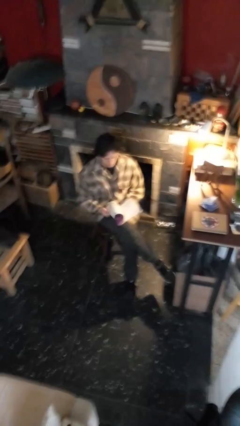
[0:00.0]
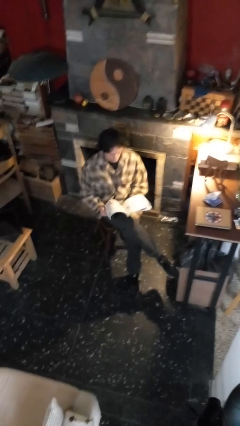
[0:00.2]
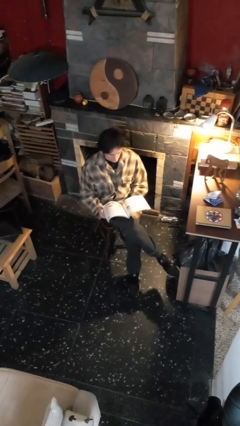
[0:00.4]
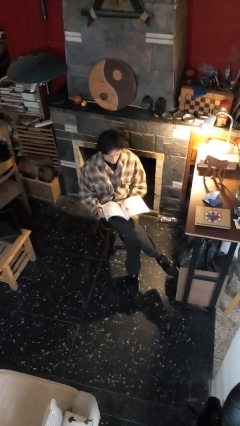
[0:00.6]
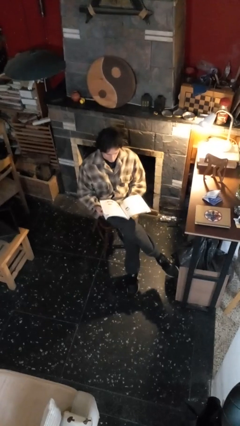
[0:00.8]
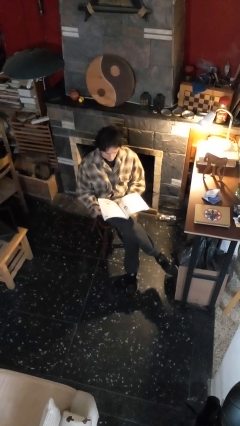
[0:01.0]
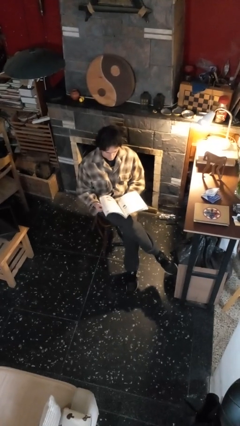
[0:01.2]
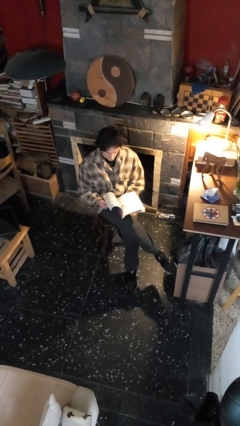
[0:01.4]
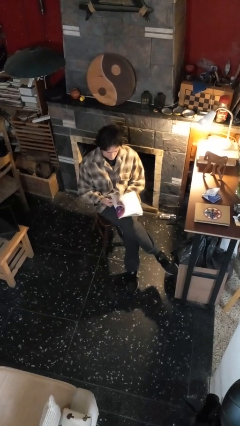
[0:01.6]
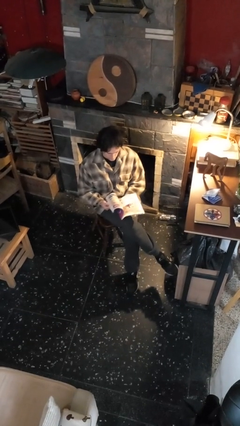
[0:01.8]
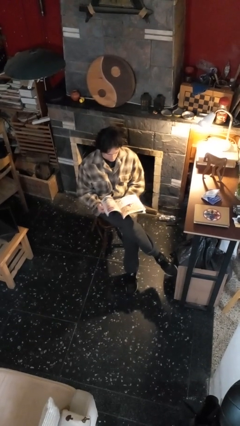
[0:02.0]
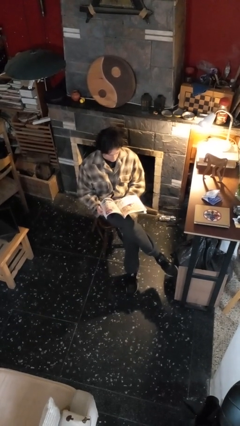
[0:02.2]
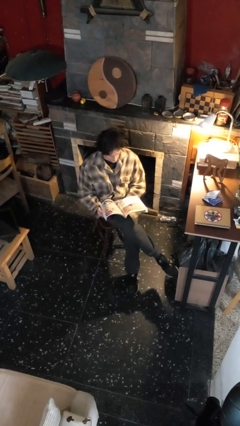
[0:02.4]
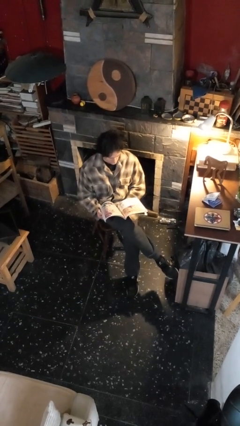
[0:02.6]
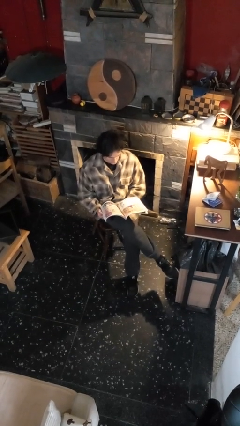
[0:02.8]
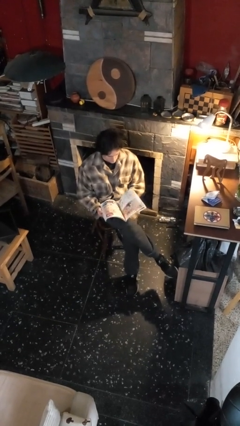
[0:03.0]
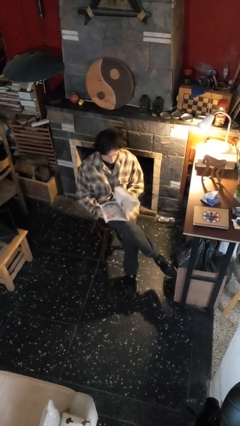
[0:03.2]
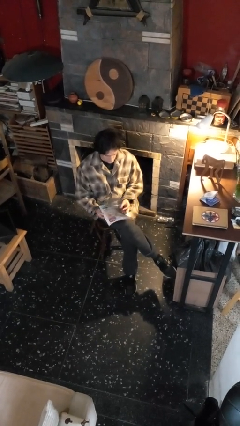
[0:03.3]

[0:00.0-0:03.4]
person reads magazine

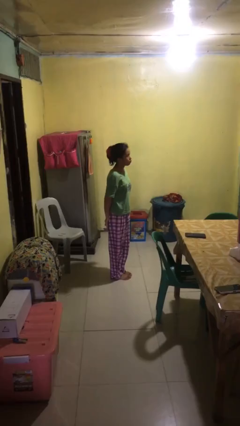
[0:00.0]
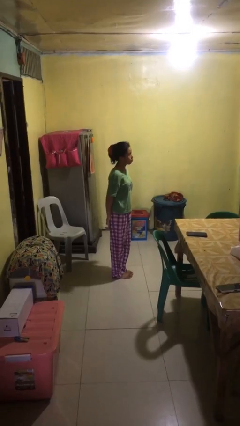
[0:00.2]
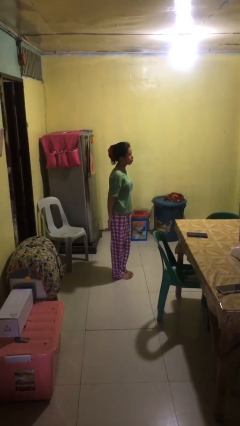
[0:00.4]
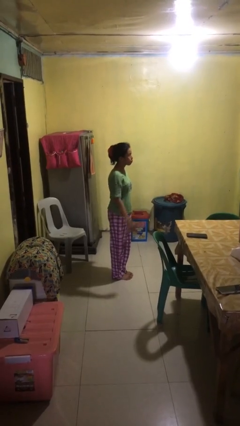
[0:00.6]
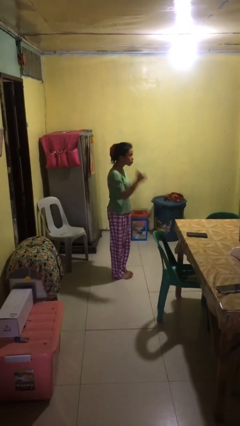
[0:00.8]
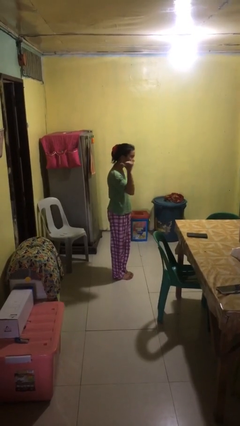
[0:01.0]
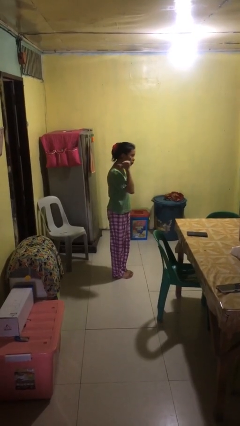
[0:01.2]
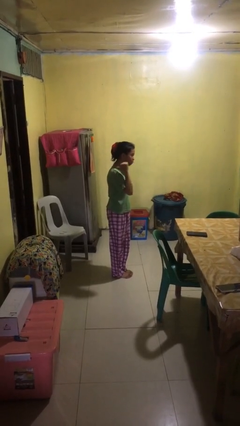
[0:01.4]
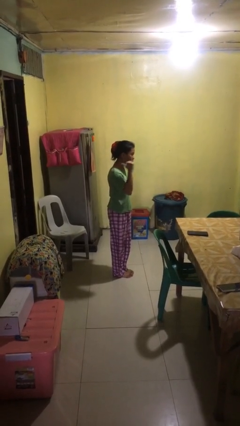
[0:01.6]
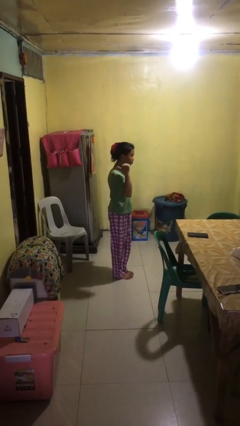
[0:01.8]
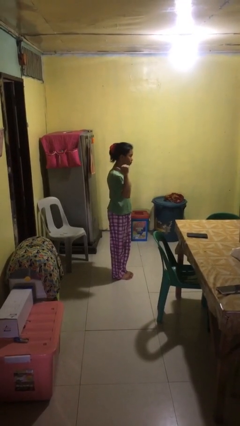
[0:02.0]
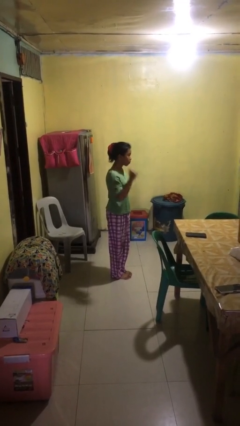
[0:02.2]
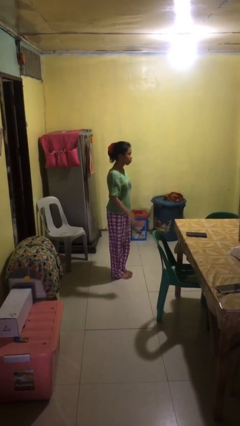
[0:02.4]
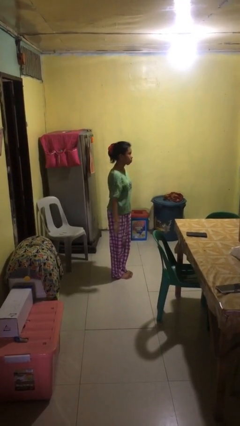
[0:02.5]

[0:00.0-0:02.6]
person gestures behind me

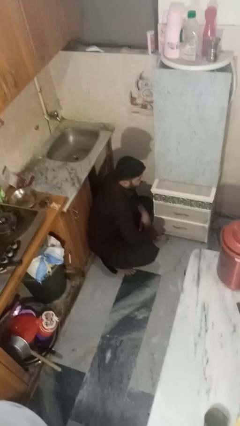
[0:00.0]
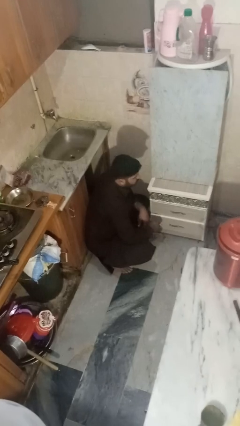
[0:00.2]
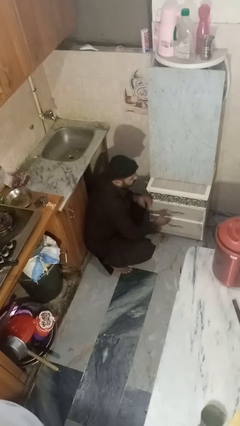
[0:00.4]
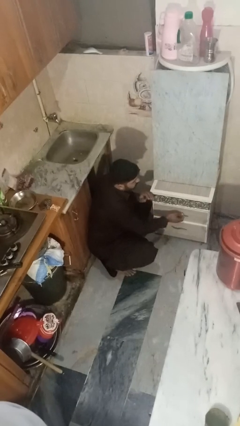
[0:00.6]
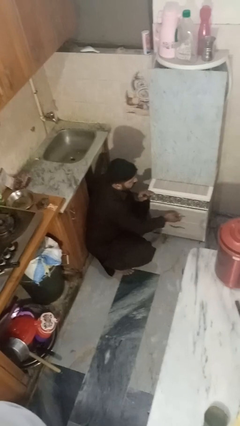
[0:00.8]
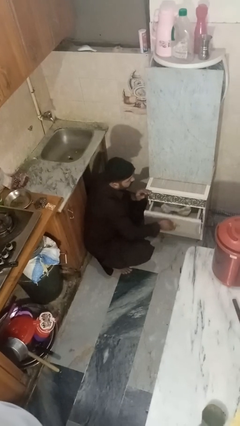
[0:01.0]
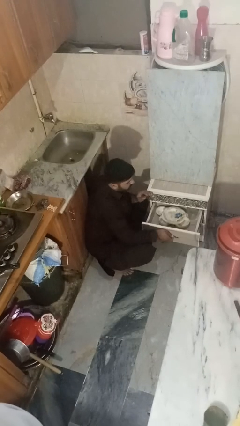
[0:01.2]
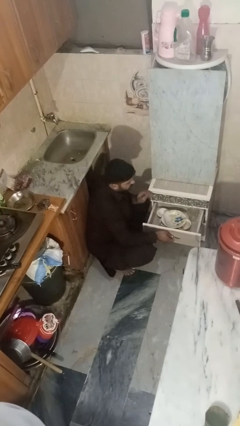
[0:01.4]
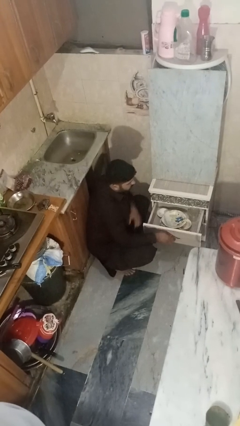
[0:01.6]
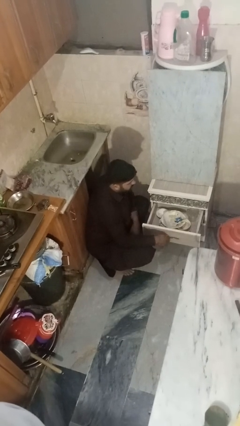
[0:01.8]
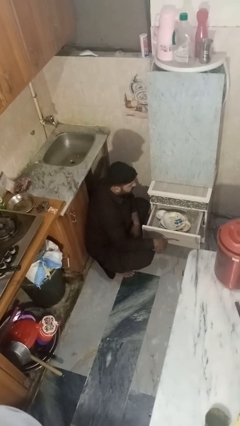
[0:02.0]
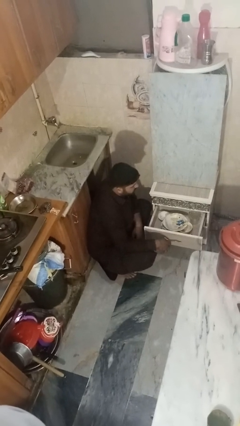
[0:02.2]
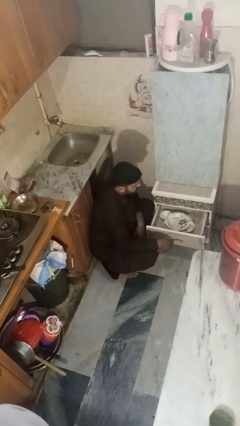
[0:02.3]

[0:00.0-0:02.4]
person opens kitchen drawer

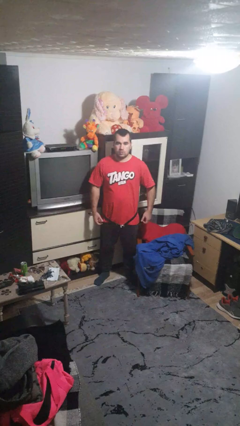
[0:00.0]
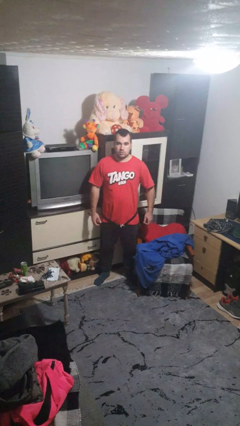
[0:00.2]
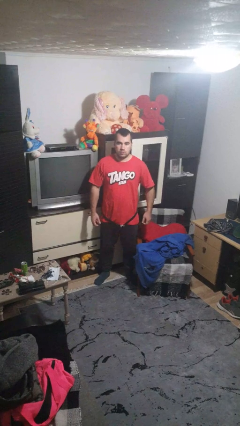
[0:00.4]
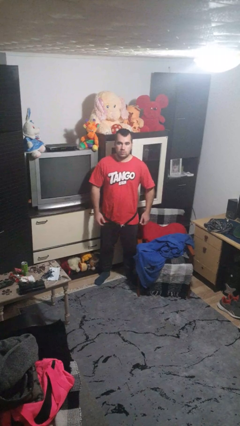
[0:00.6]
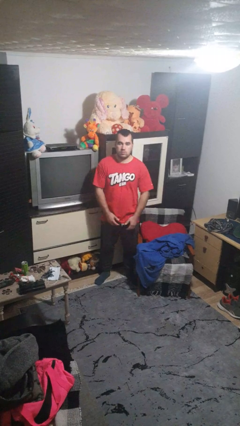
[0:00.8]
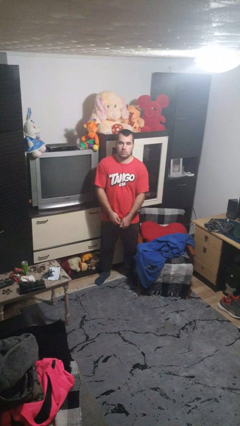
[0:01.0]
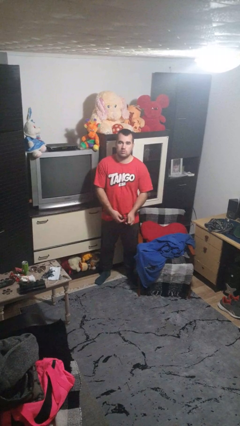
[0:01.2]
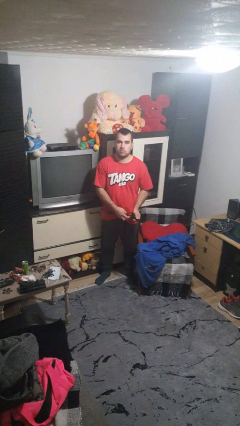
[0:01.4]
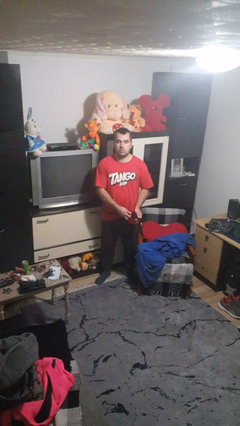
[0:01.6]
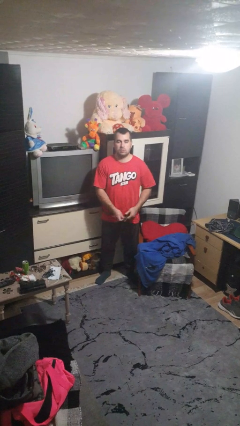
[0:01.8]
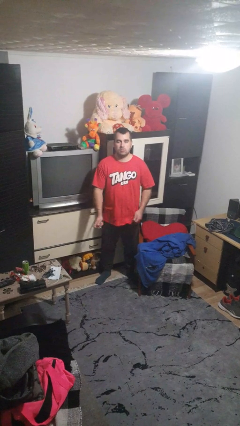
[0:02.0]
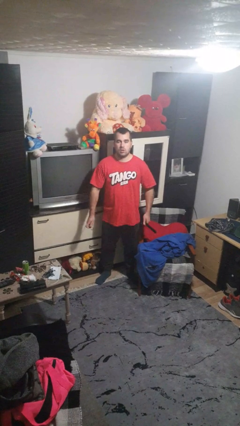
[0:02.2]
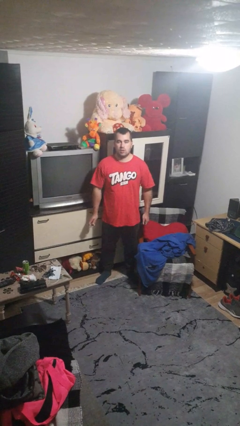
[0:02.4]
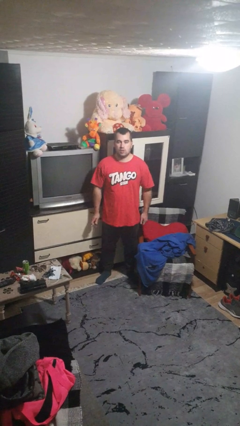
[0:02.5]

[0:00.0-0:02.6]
person takes off belt

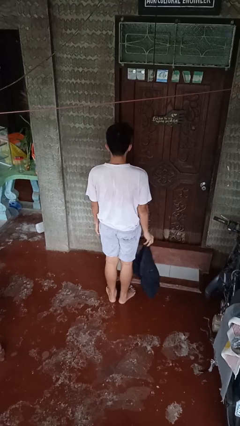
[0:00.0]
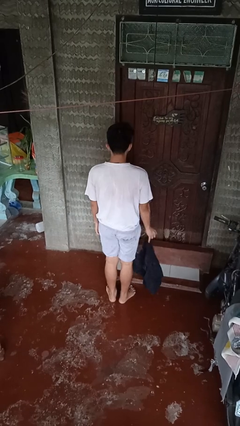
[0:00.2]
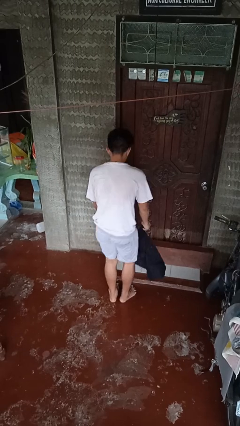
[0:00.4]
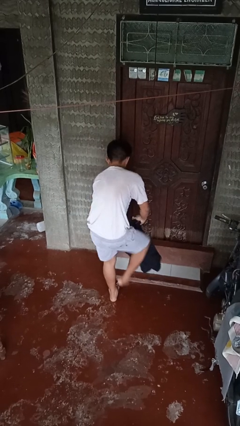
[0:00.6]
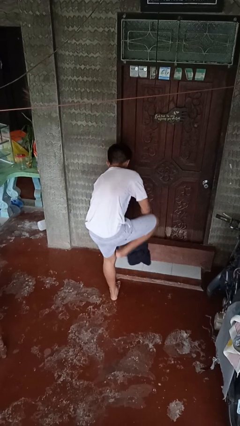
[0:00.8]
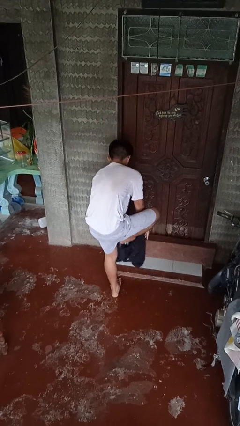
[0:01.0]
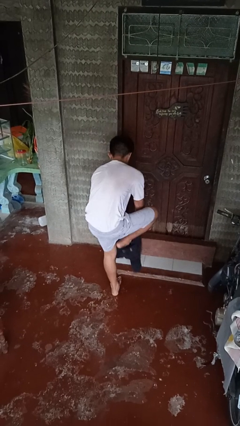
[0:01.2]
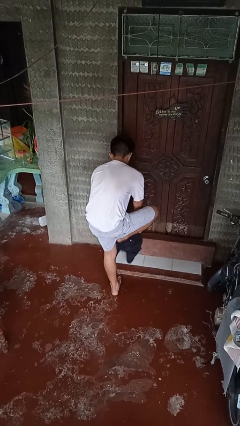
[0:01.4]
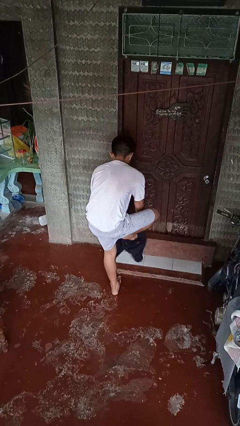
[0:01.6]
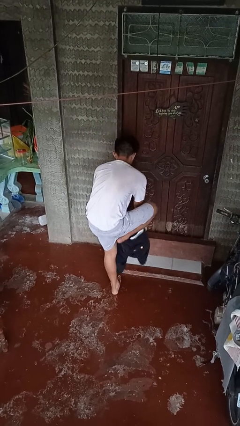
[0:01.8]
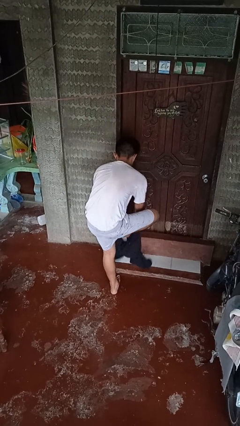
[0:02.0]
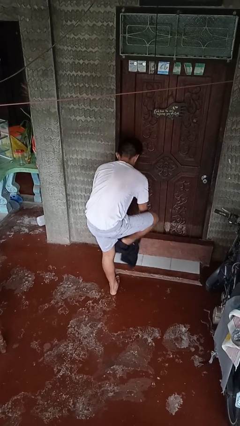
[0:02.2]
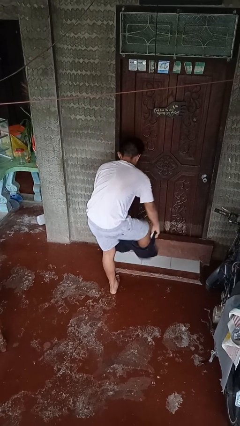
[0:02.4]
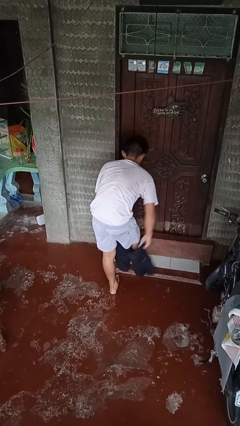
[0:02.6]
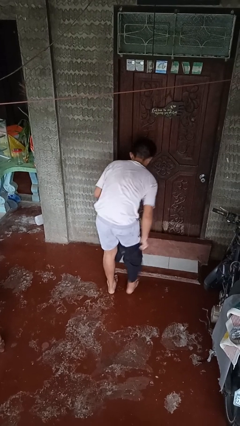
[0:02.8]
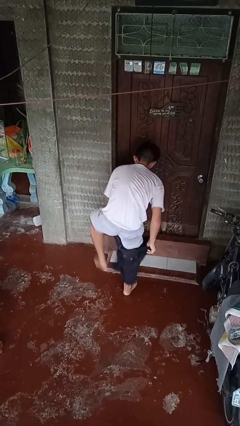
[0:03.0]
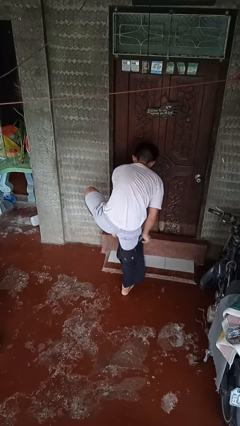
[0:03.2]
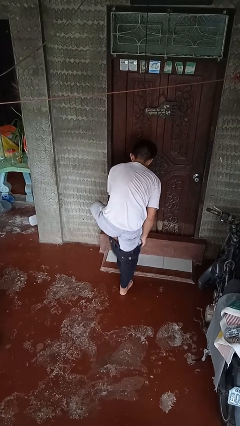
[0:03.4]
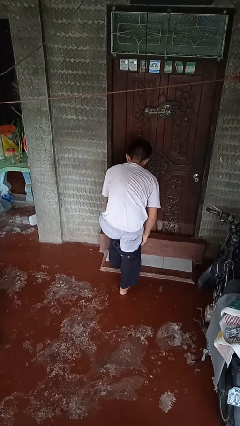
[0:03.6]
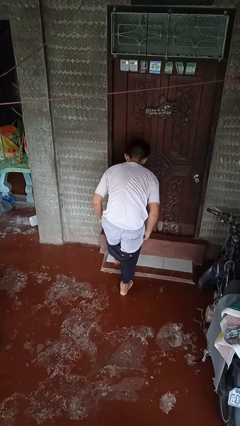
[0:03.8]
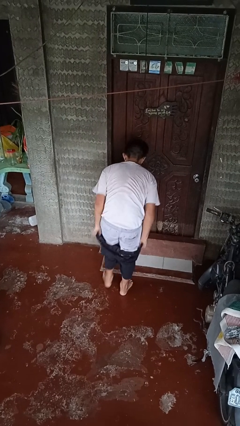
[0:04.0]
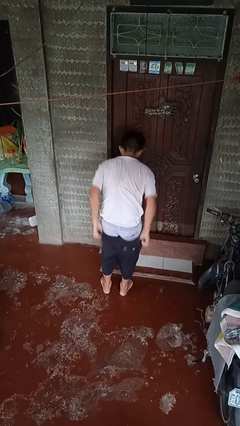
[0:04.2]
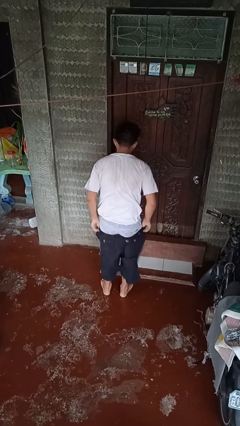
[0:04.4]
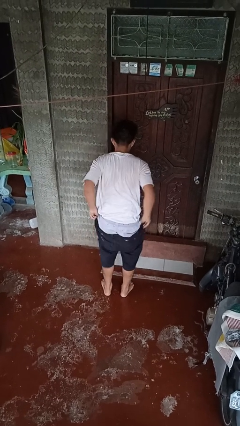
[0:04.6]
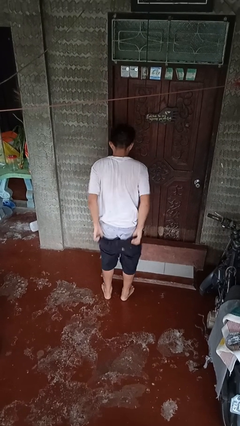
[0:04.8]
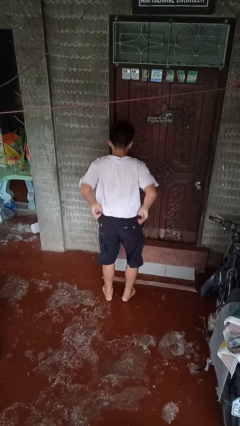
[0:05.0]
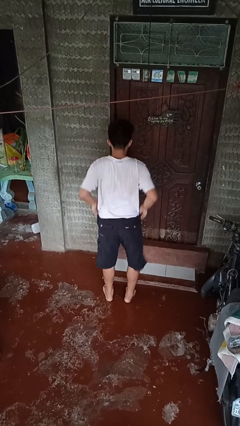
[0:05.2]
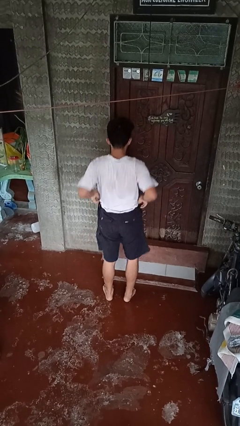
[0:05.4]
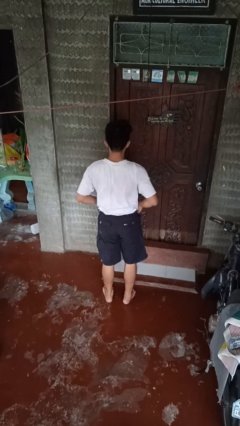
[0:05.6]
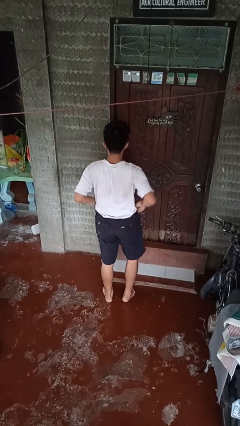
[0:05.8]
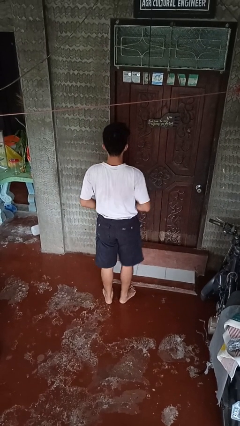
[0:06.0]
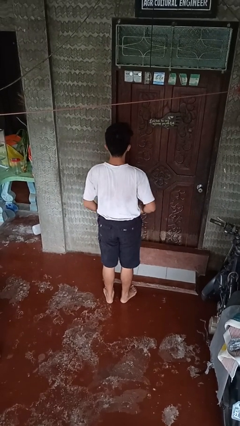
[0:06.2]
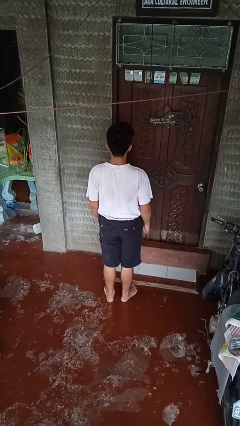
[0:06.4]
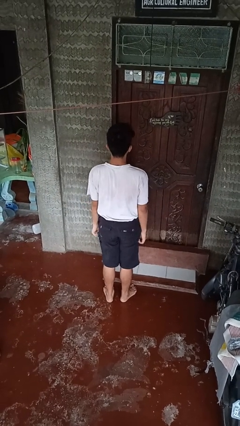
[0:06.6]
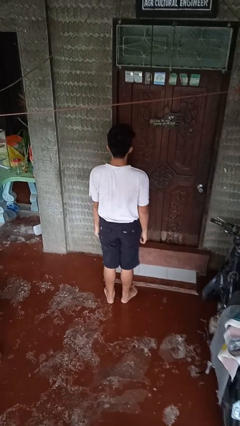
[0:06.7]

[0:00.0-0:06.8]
person puts on pants
